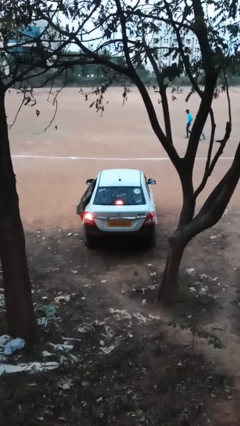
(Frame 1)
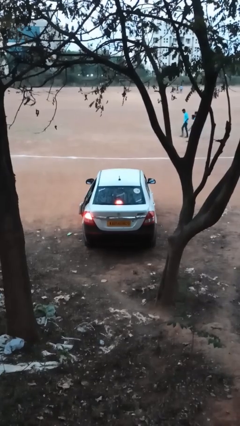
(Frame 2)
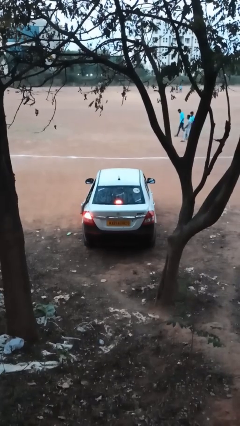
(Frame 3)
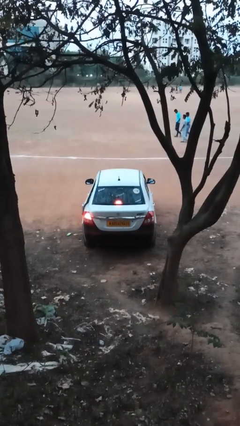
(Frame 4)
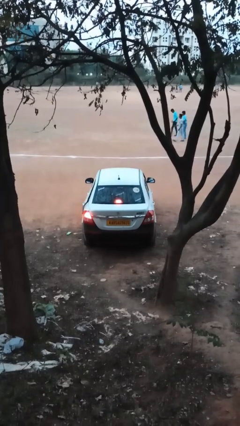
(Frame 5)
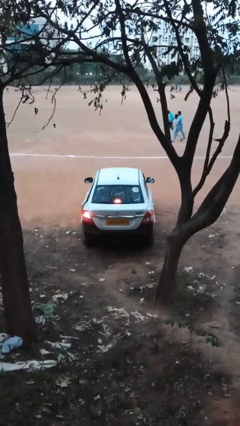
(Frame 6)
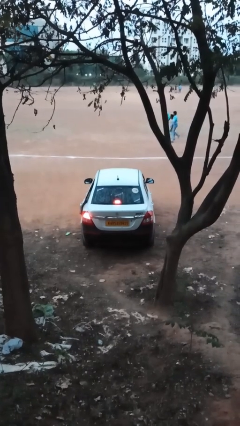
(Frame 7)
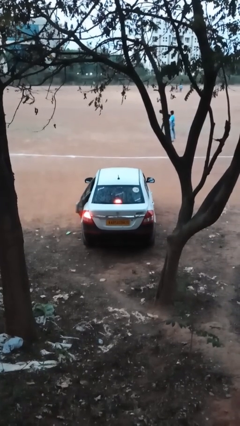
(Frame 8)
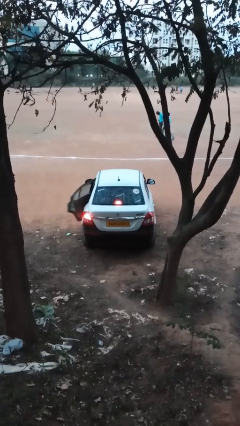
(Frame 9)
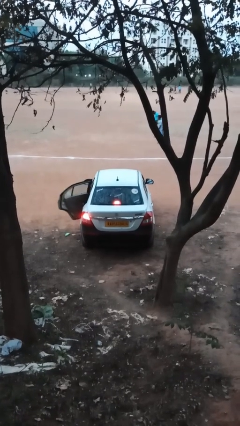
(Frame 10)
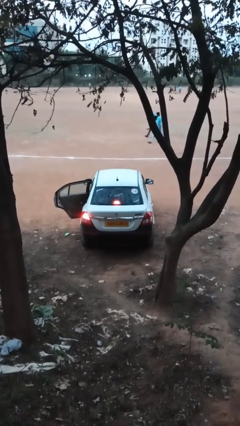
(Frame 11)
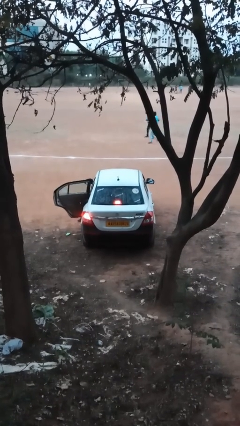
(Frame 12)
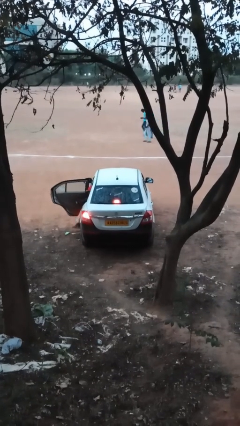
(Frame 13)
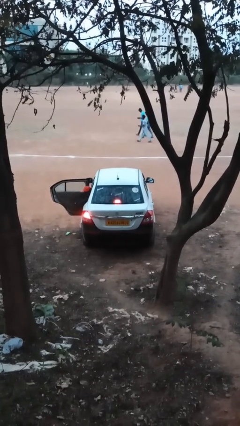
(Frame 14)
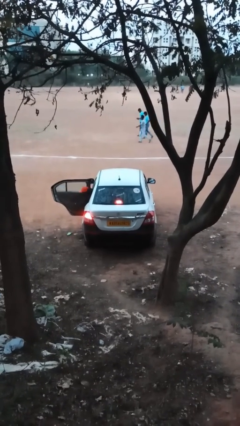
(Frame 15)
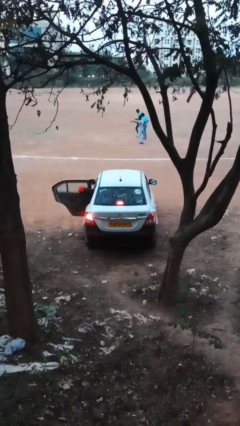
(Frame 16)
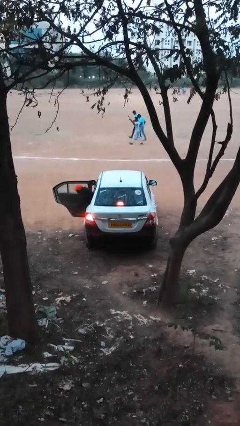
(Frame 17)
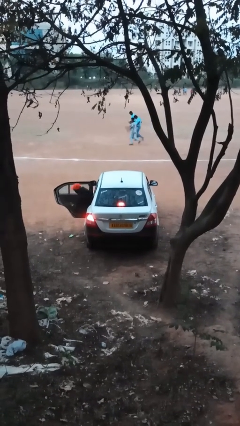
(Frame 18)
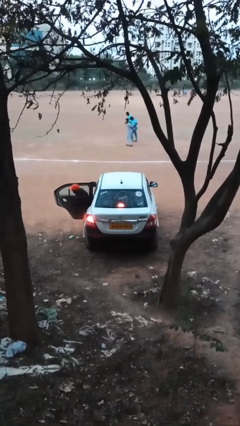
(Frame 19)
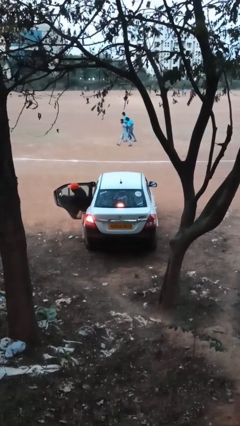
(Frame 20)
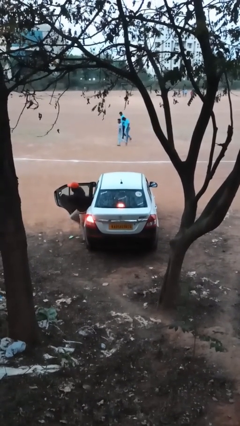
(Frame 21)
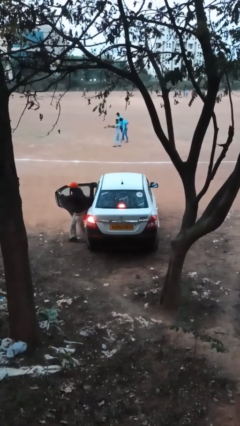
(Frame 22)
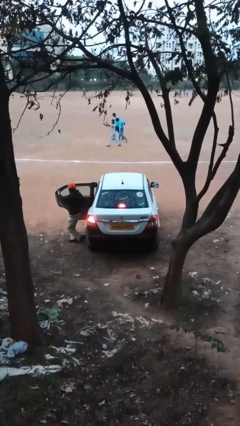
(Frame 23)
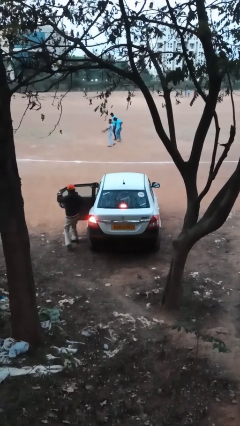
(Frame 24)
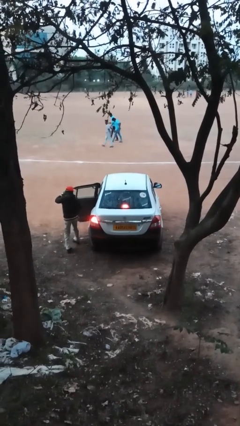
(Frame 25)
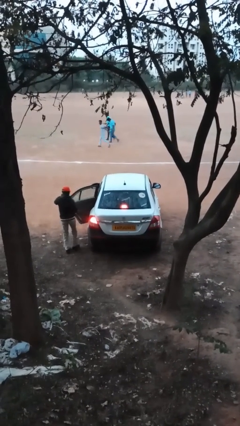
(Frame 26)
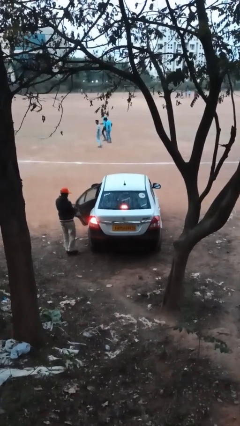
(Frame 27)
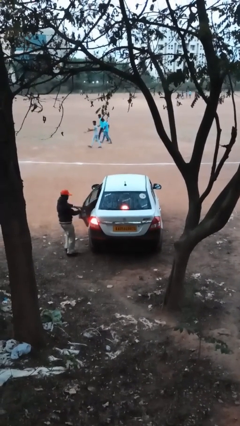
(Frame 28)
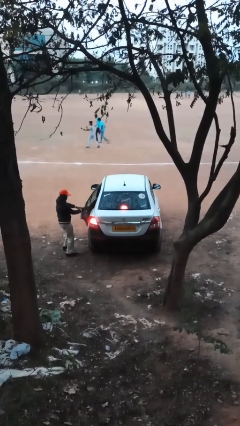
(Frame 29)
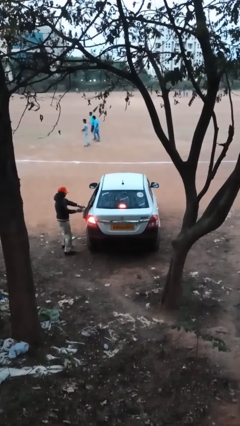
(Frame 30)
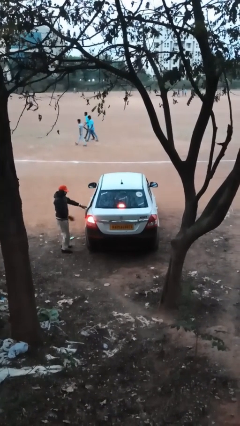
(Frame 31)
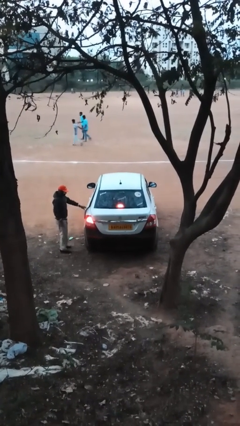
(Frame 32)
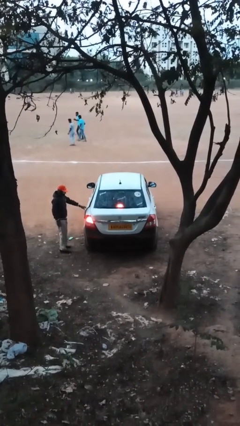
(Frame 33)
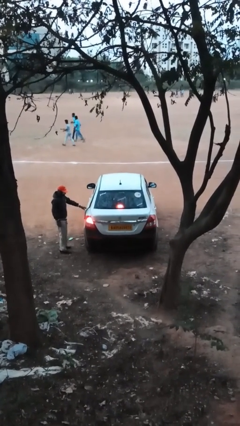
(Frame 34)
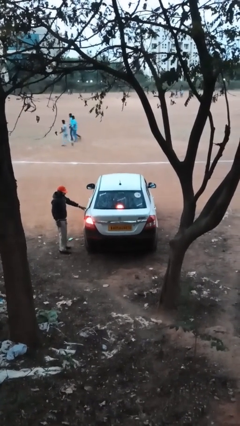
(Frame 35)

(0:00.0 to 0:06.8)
car drops off person

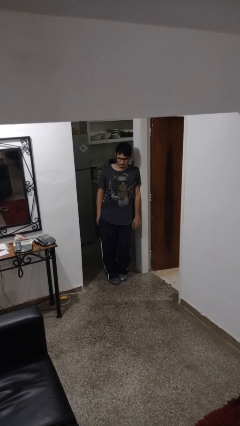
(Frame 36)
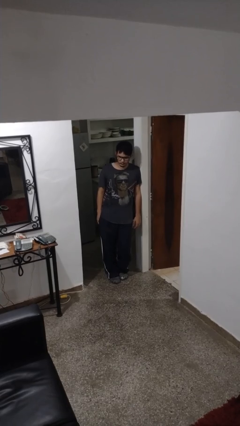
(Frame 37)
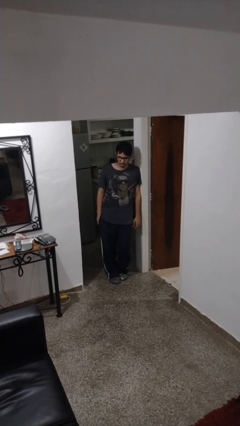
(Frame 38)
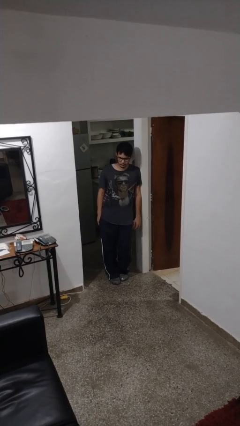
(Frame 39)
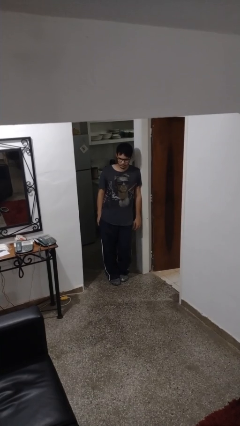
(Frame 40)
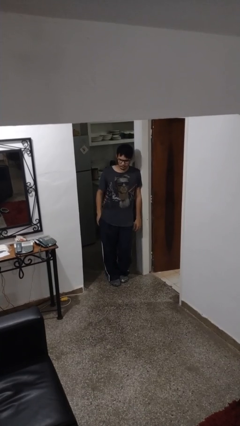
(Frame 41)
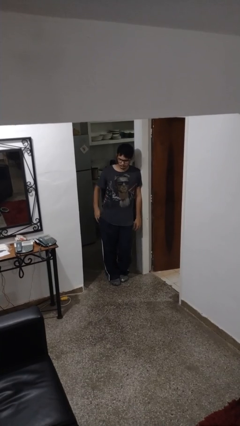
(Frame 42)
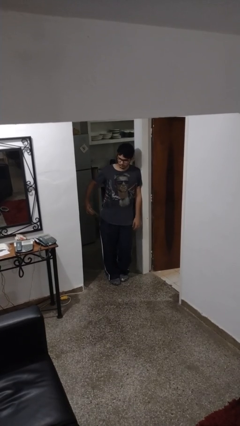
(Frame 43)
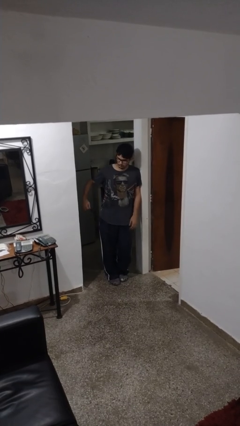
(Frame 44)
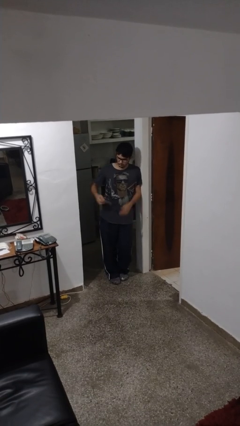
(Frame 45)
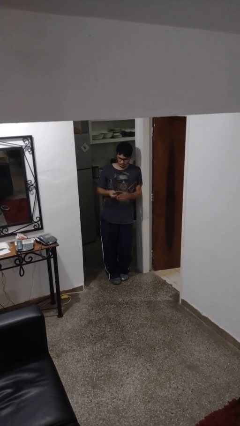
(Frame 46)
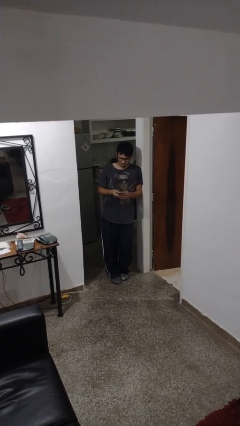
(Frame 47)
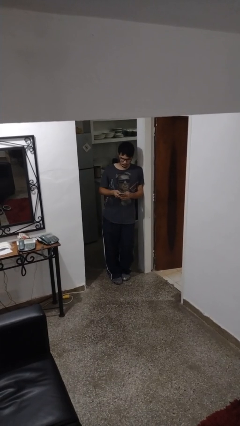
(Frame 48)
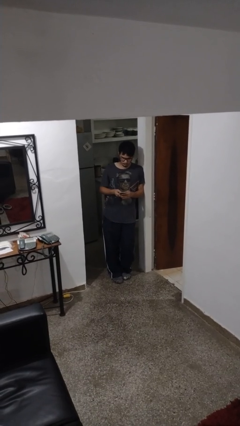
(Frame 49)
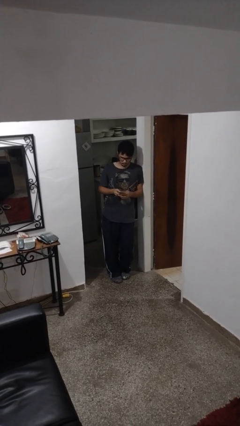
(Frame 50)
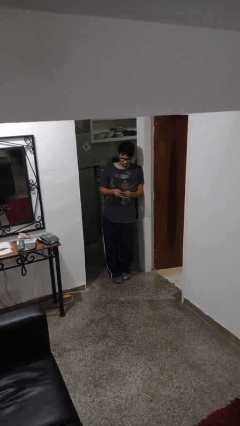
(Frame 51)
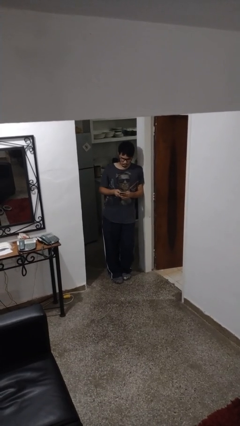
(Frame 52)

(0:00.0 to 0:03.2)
person takes phone from pocket

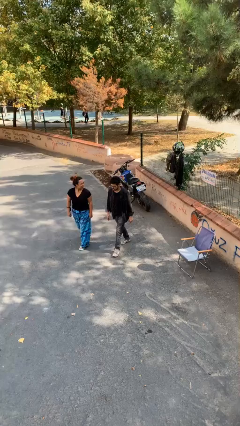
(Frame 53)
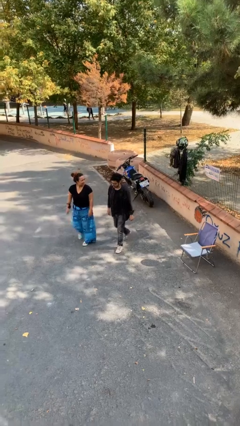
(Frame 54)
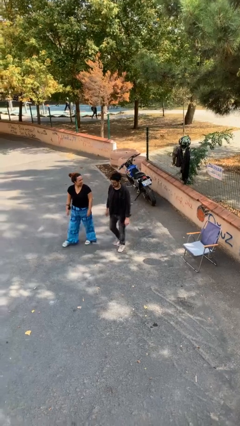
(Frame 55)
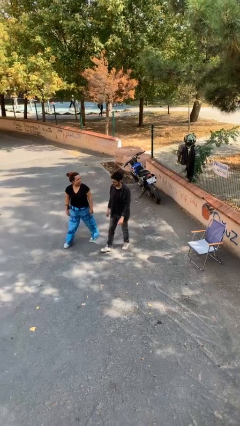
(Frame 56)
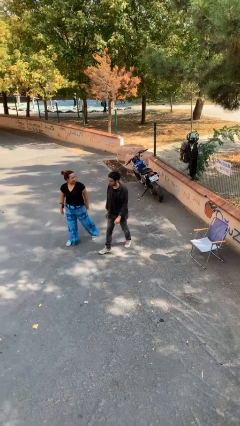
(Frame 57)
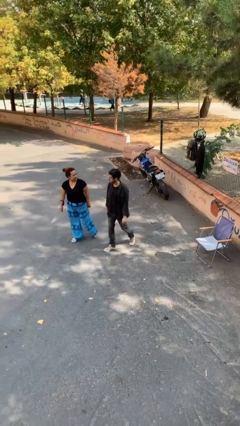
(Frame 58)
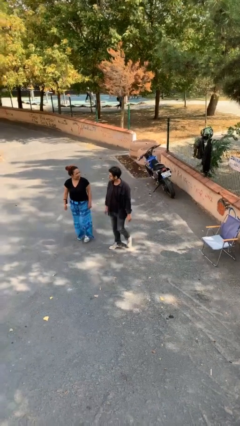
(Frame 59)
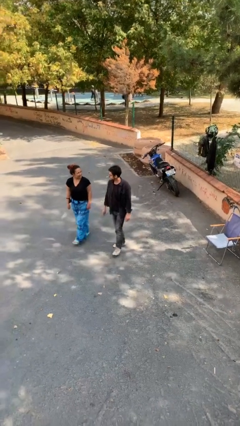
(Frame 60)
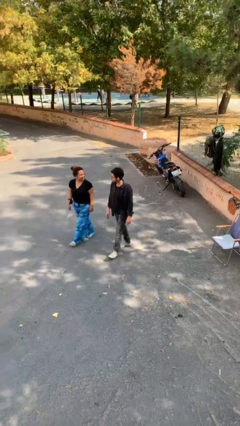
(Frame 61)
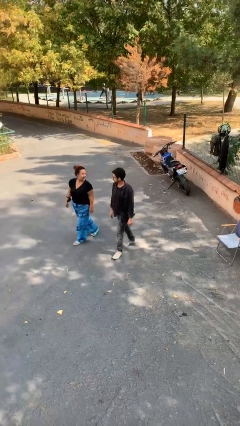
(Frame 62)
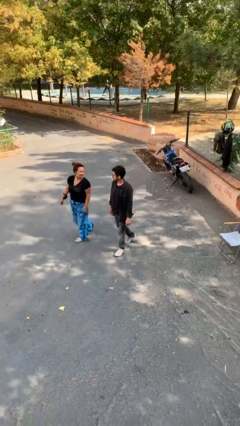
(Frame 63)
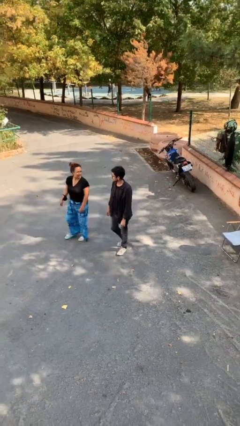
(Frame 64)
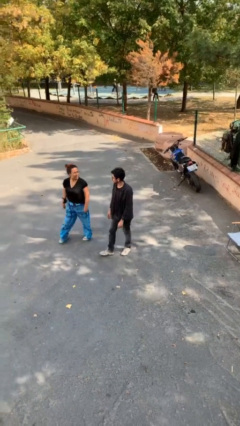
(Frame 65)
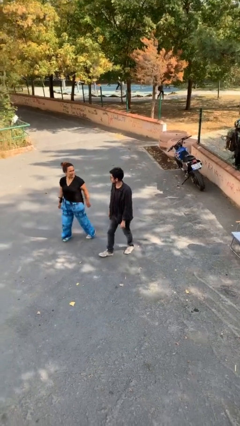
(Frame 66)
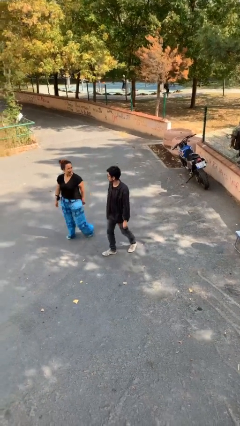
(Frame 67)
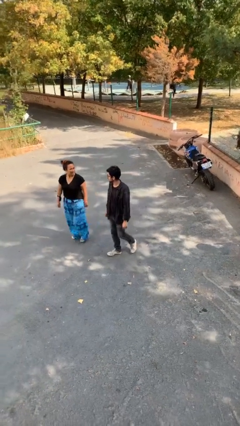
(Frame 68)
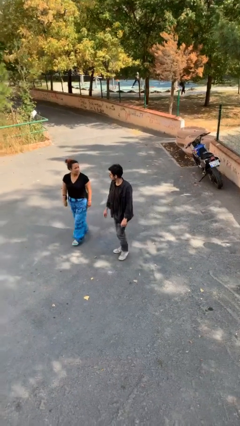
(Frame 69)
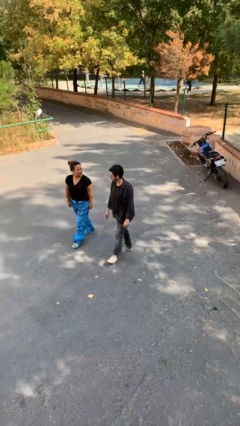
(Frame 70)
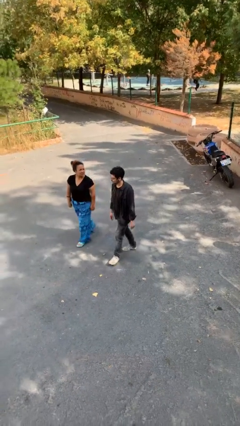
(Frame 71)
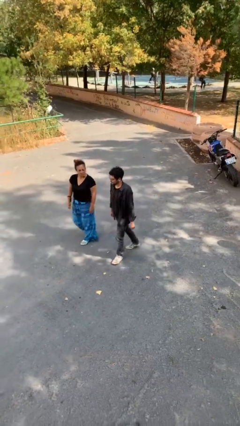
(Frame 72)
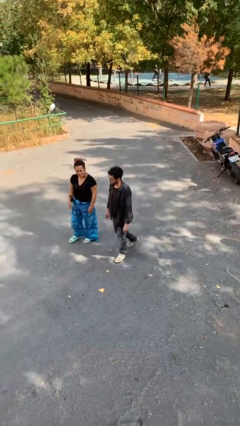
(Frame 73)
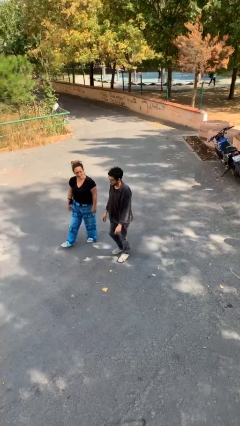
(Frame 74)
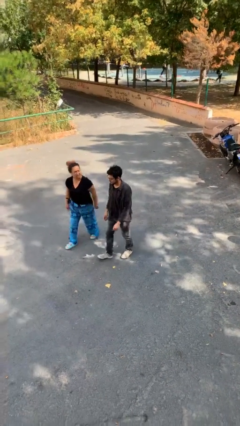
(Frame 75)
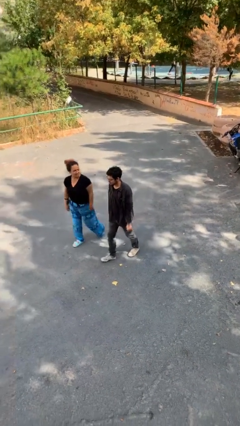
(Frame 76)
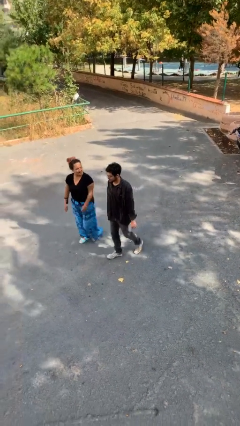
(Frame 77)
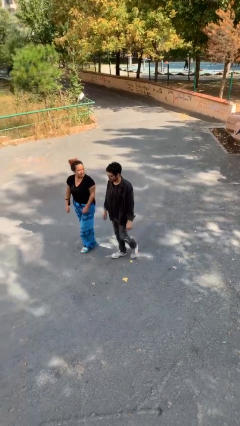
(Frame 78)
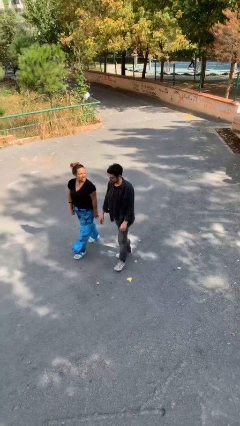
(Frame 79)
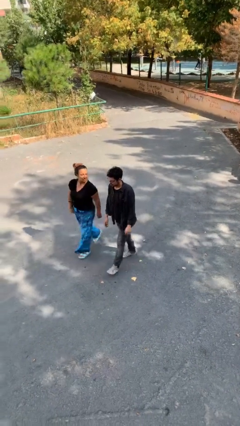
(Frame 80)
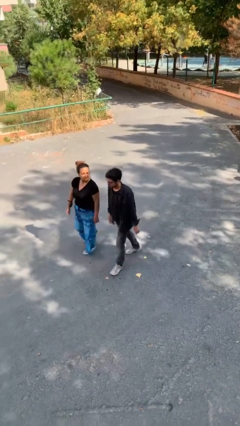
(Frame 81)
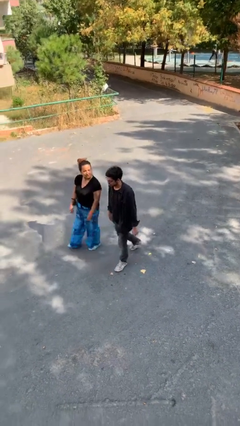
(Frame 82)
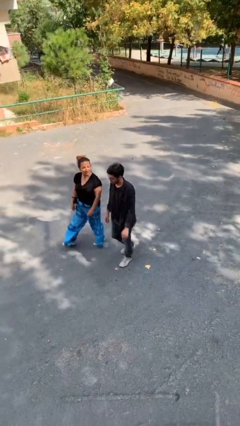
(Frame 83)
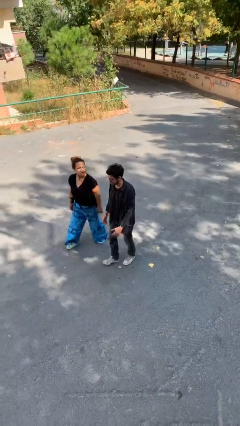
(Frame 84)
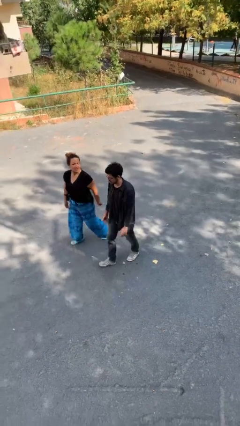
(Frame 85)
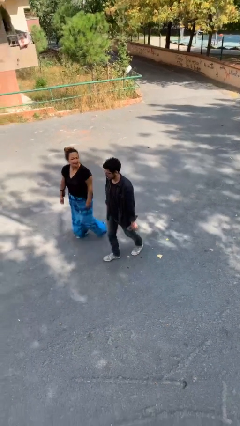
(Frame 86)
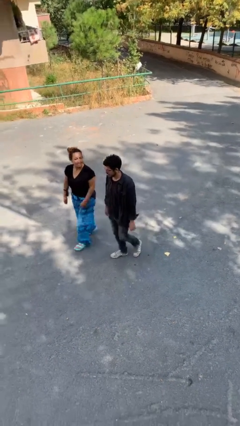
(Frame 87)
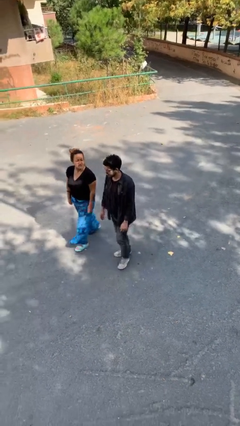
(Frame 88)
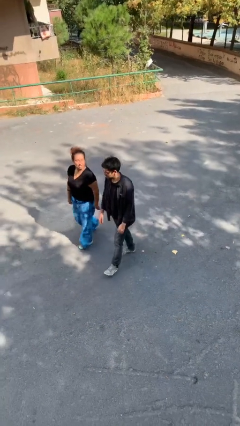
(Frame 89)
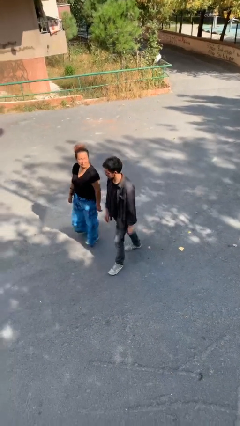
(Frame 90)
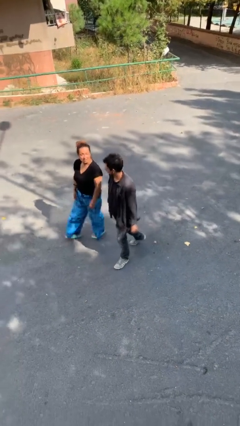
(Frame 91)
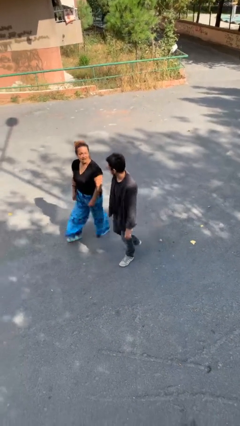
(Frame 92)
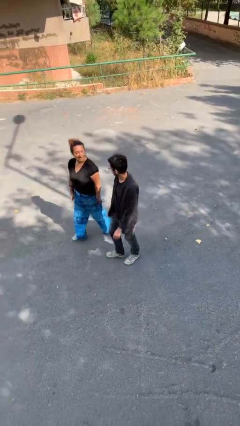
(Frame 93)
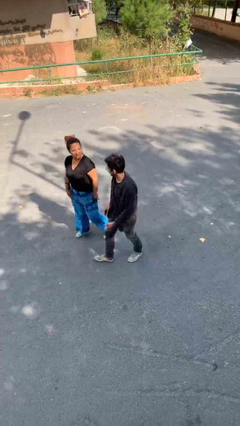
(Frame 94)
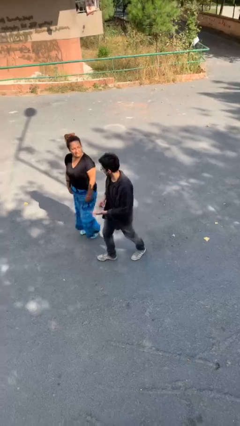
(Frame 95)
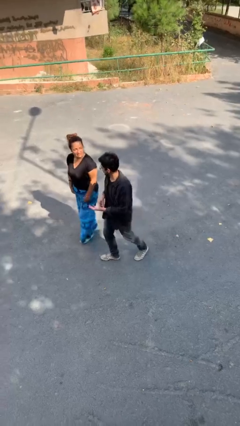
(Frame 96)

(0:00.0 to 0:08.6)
person talks to person
